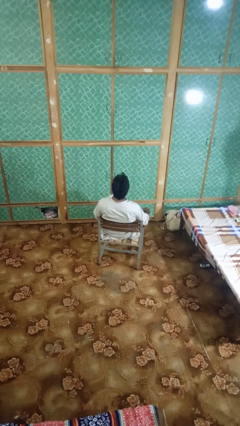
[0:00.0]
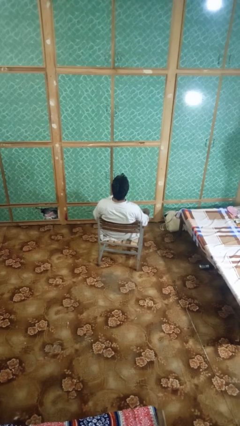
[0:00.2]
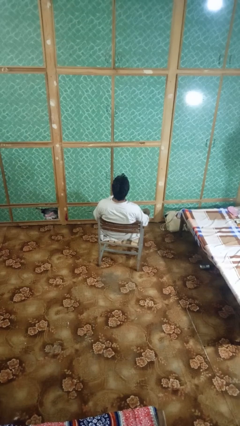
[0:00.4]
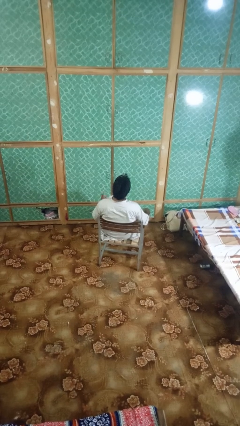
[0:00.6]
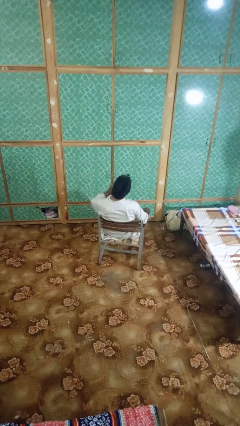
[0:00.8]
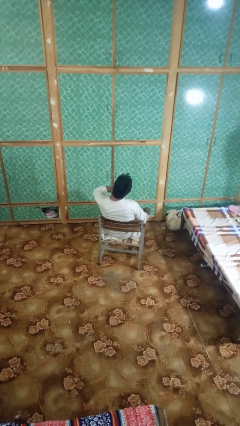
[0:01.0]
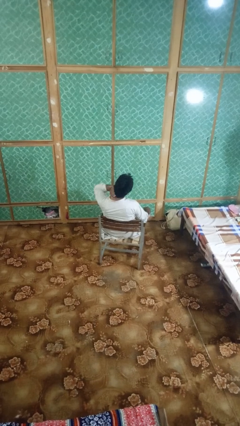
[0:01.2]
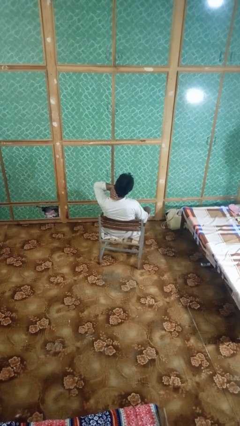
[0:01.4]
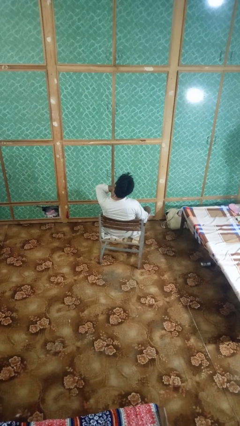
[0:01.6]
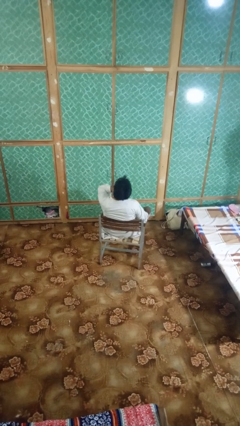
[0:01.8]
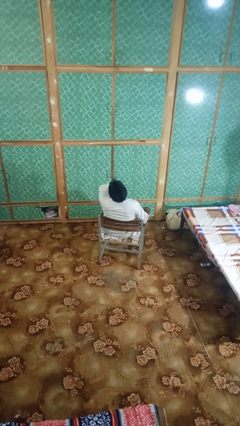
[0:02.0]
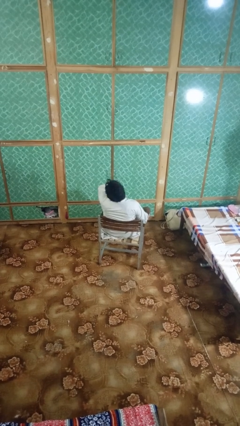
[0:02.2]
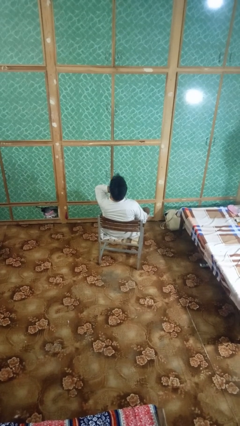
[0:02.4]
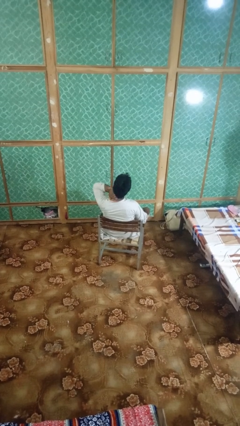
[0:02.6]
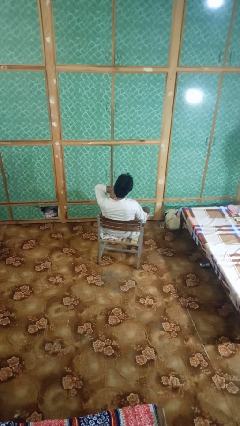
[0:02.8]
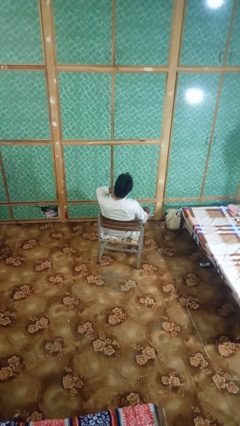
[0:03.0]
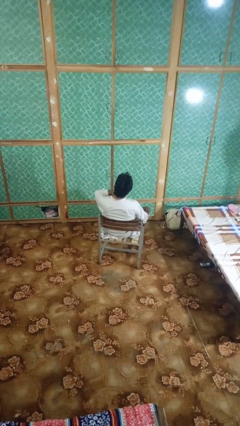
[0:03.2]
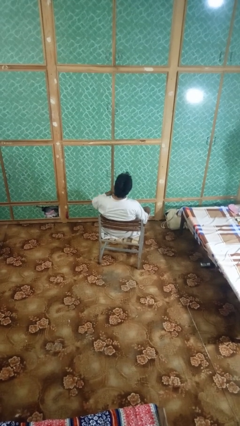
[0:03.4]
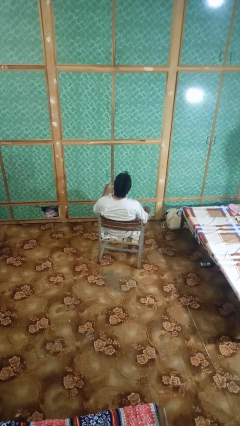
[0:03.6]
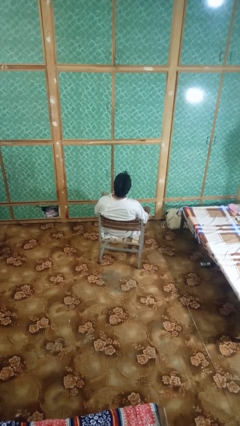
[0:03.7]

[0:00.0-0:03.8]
person rubs neck

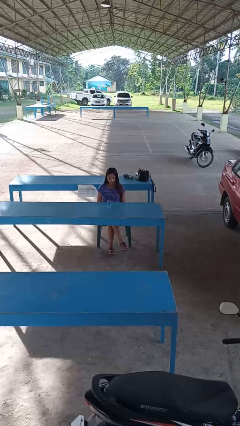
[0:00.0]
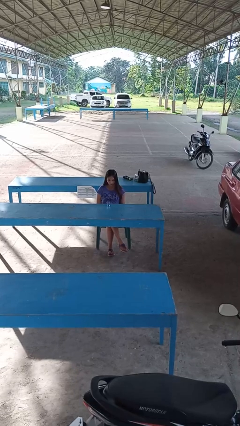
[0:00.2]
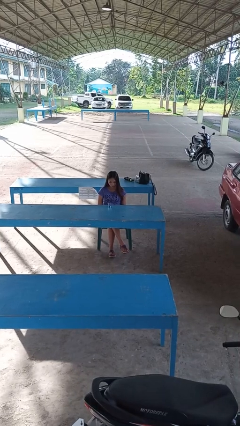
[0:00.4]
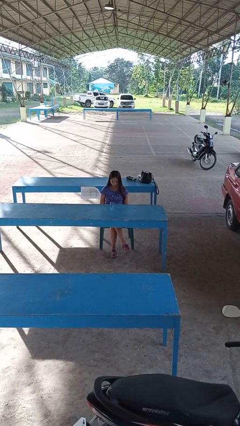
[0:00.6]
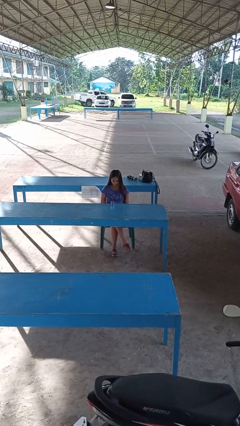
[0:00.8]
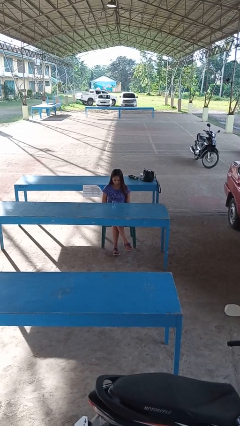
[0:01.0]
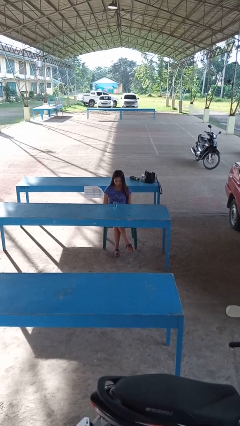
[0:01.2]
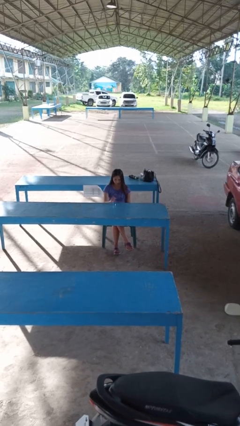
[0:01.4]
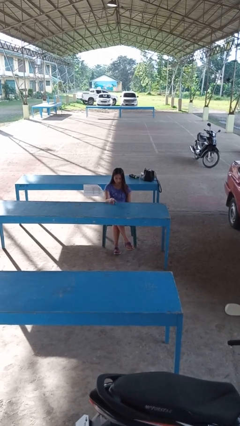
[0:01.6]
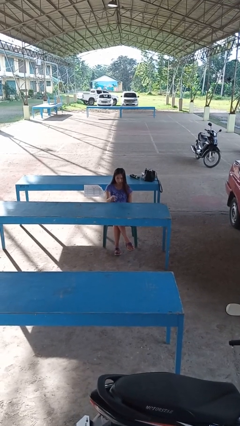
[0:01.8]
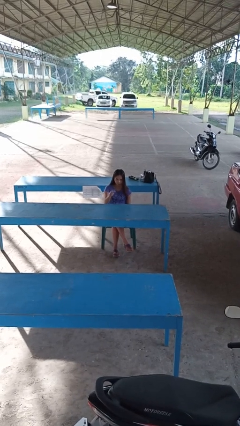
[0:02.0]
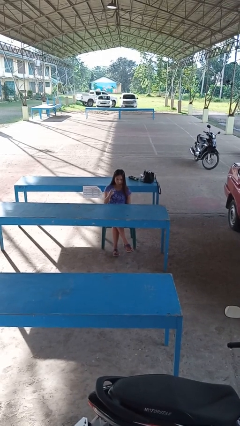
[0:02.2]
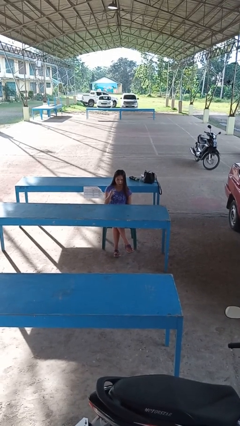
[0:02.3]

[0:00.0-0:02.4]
person picks up object from table

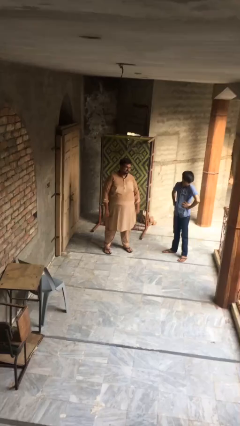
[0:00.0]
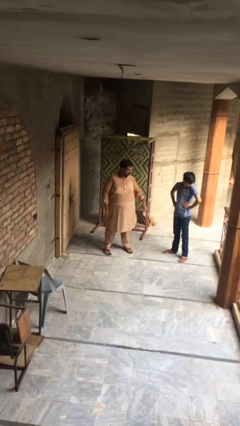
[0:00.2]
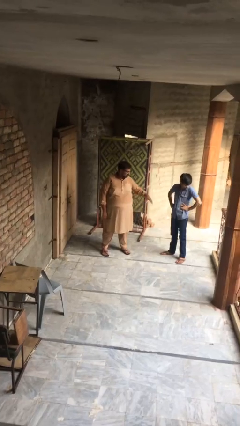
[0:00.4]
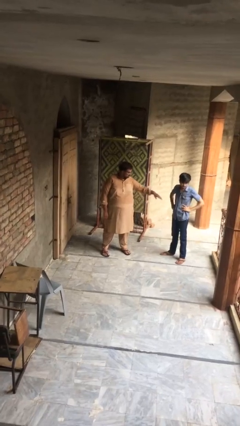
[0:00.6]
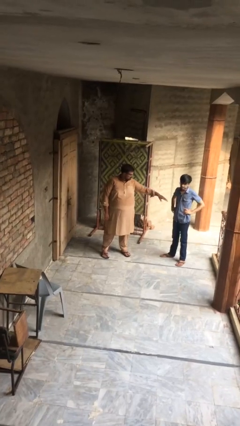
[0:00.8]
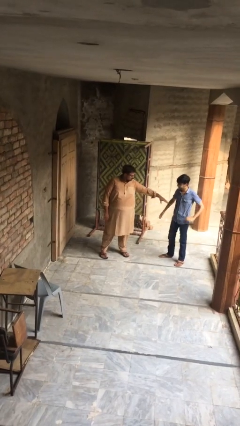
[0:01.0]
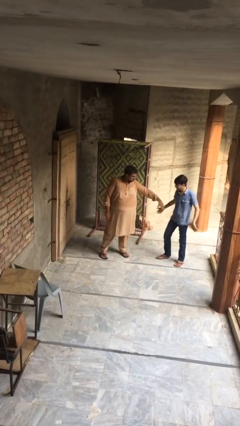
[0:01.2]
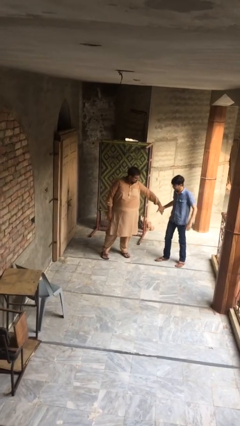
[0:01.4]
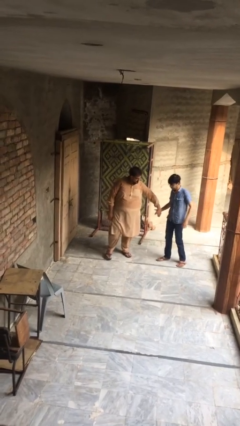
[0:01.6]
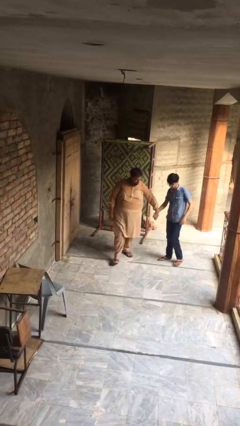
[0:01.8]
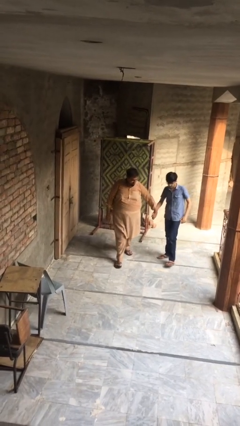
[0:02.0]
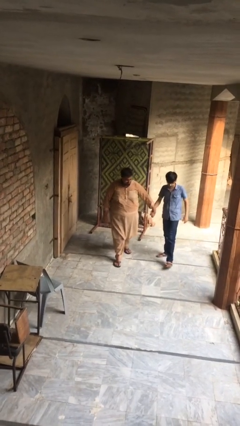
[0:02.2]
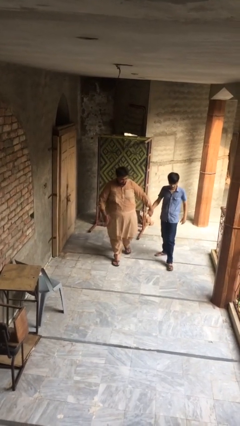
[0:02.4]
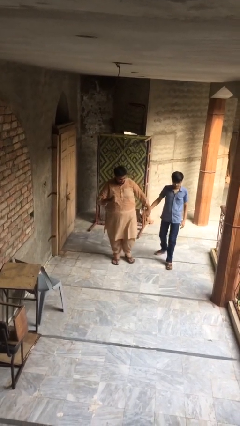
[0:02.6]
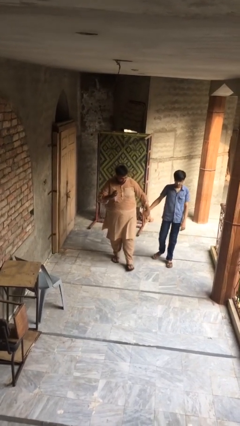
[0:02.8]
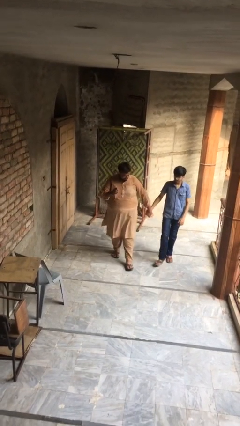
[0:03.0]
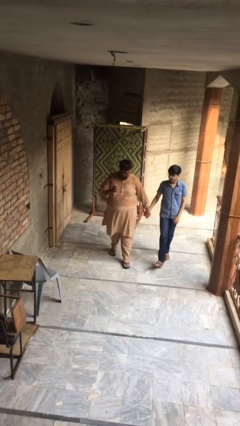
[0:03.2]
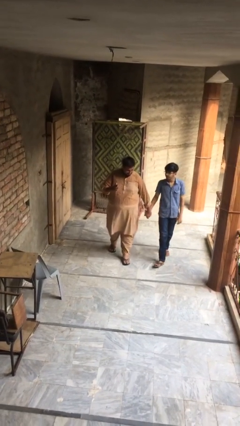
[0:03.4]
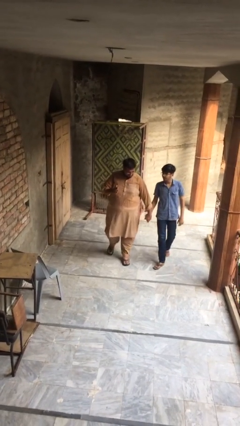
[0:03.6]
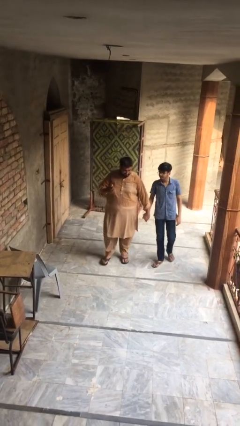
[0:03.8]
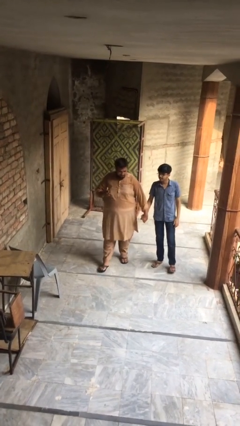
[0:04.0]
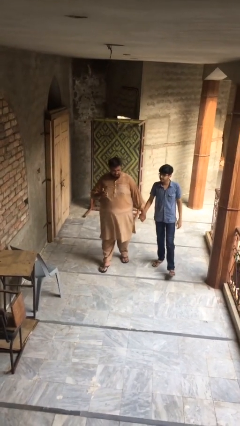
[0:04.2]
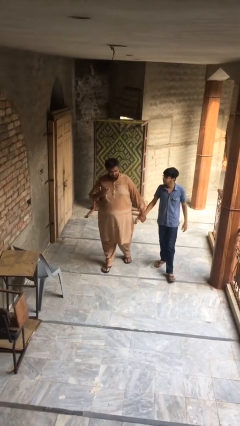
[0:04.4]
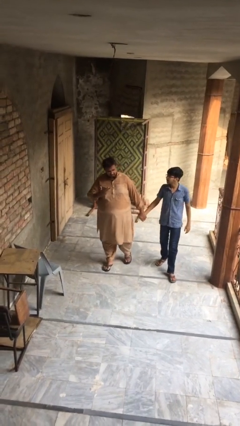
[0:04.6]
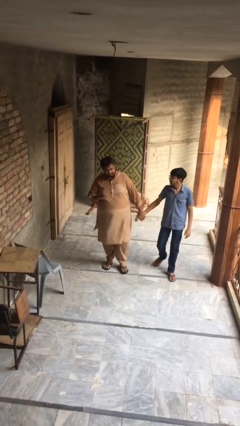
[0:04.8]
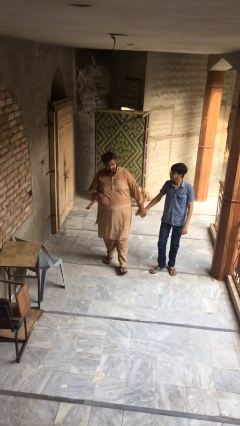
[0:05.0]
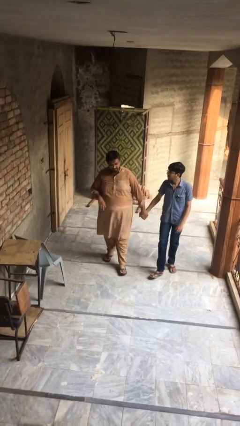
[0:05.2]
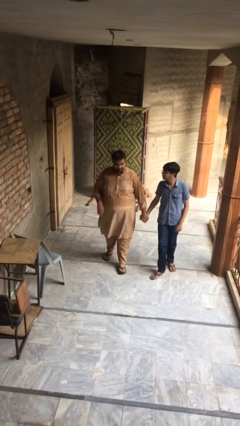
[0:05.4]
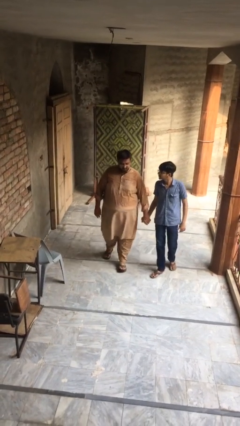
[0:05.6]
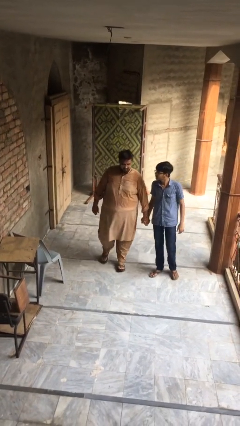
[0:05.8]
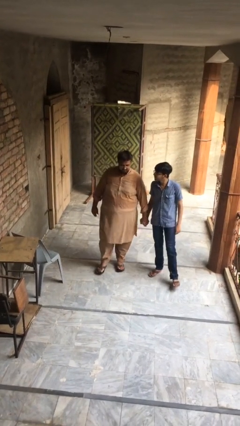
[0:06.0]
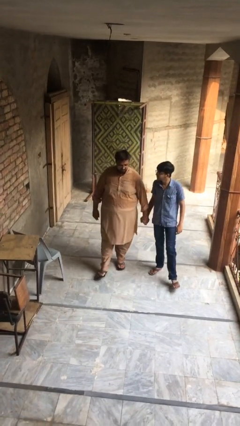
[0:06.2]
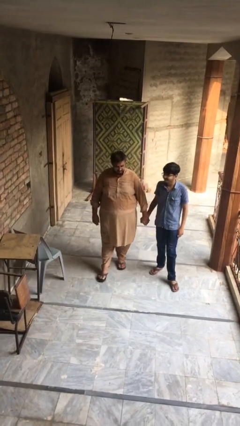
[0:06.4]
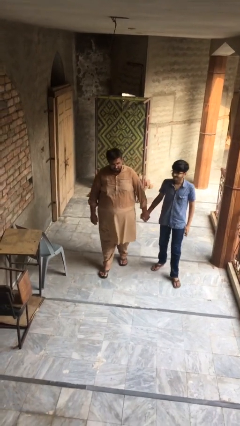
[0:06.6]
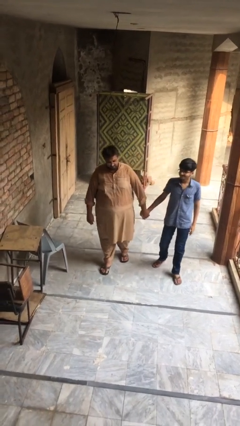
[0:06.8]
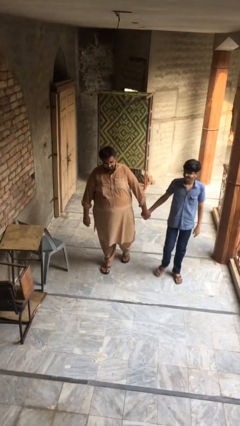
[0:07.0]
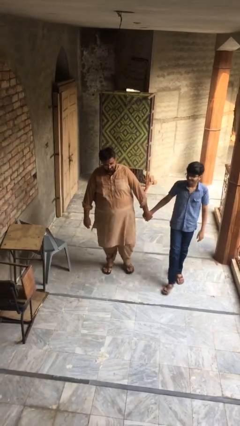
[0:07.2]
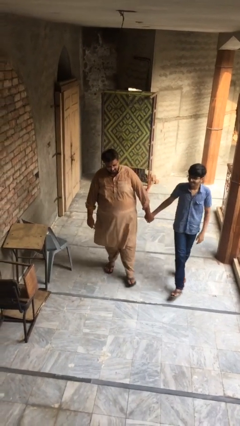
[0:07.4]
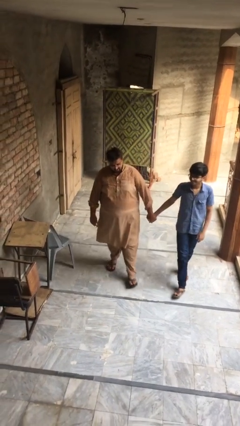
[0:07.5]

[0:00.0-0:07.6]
person holds hand

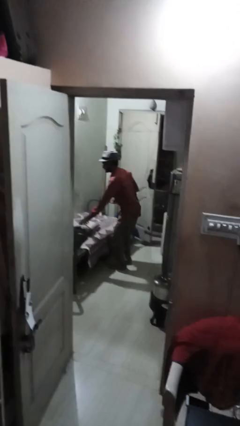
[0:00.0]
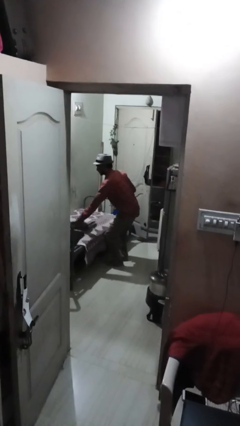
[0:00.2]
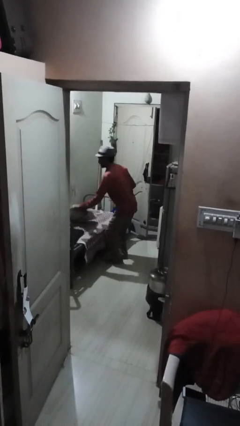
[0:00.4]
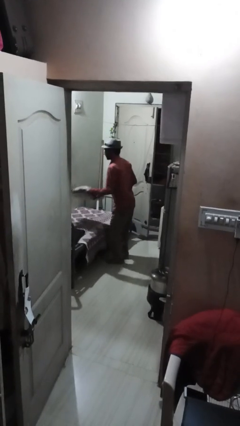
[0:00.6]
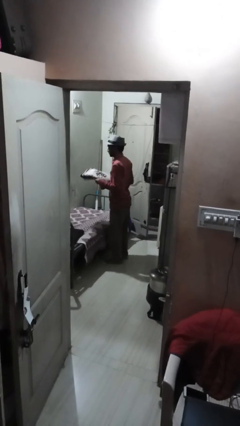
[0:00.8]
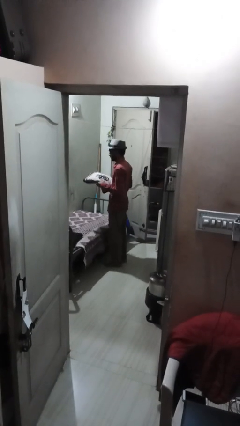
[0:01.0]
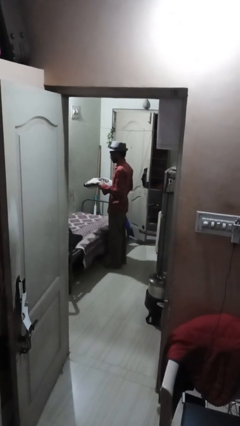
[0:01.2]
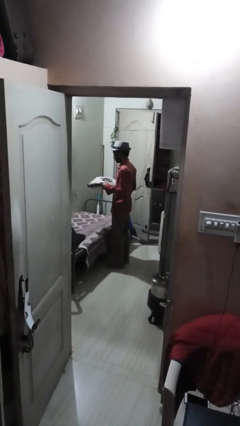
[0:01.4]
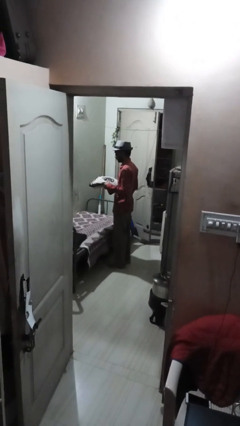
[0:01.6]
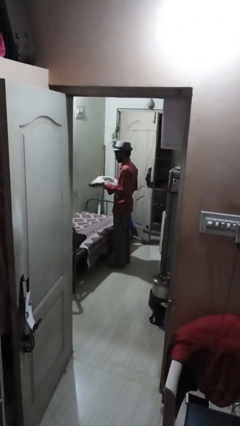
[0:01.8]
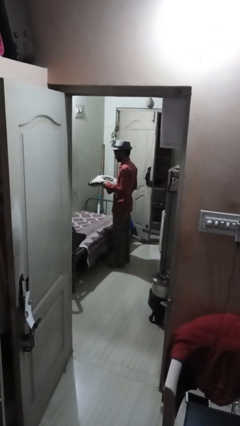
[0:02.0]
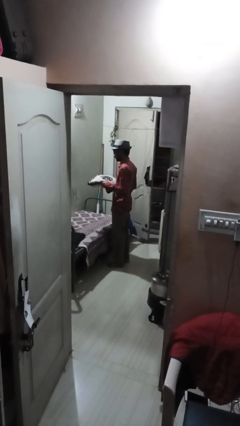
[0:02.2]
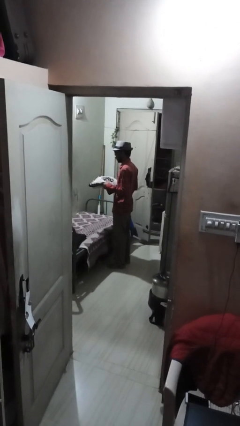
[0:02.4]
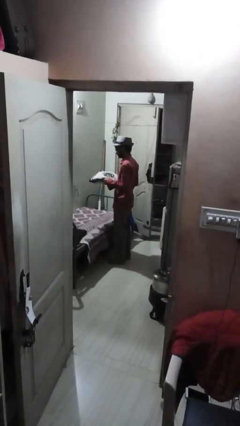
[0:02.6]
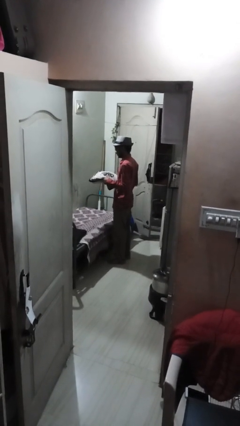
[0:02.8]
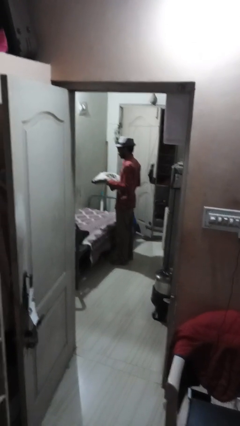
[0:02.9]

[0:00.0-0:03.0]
person picks up object from bed

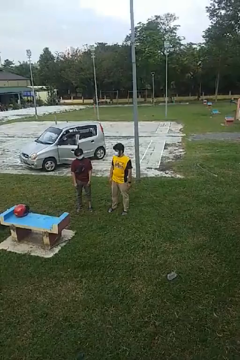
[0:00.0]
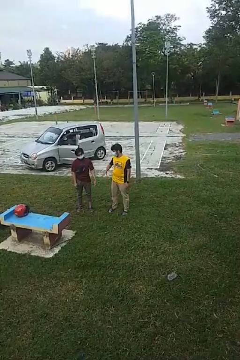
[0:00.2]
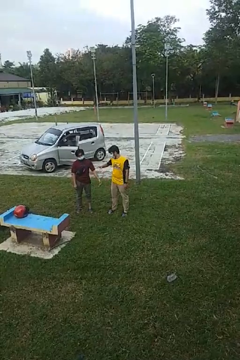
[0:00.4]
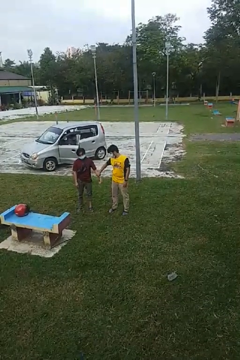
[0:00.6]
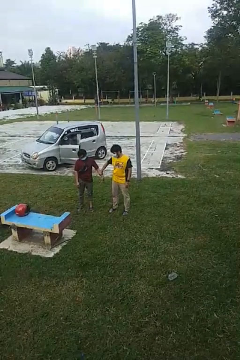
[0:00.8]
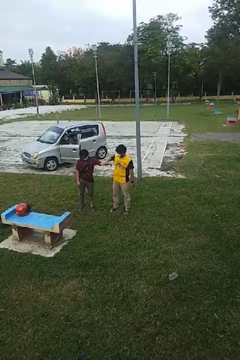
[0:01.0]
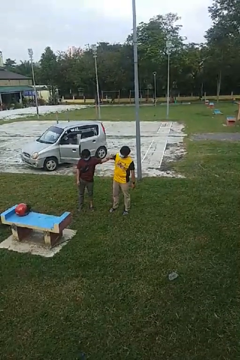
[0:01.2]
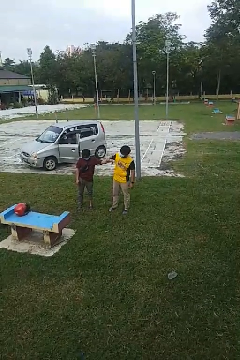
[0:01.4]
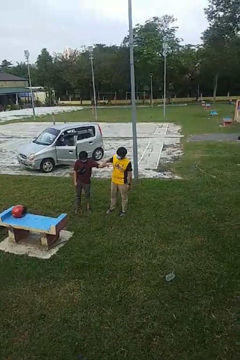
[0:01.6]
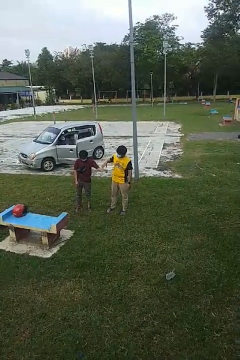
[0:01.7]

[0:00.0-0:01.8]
person grabs person by forearm
